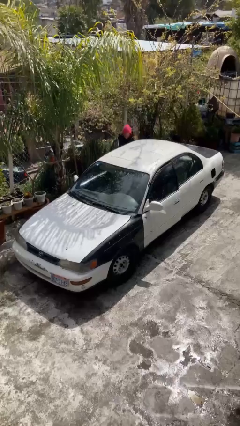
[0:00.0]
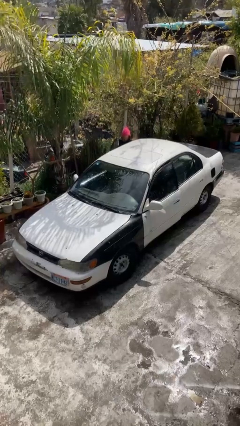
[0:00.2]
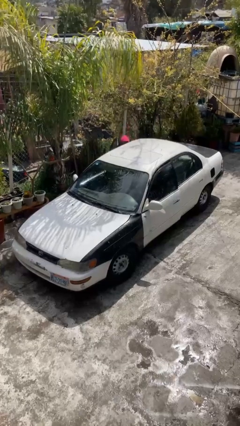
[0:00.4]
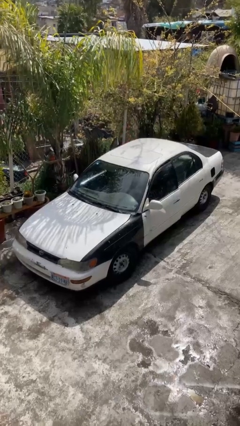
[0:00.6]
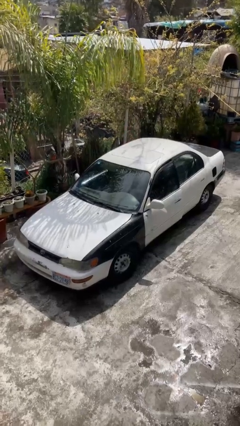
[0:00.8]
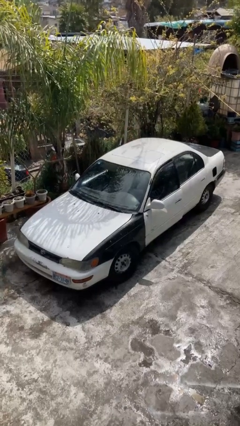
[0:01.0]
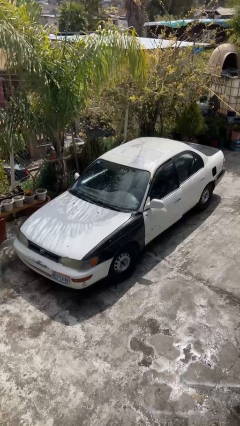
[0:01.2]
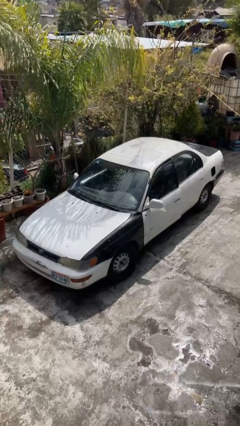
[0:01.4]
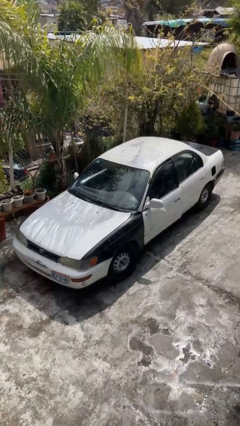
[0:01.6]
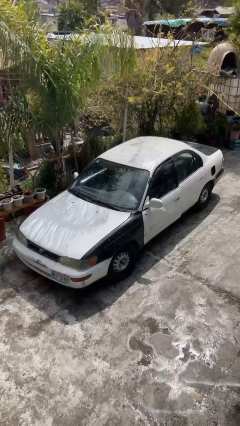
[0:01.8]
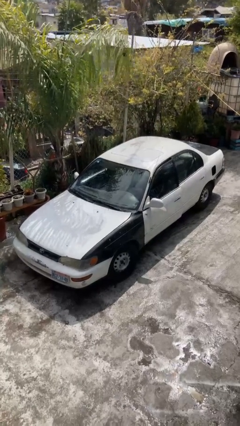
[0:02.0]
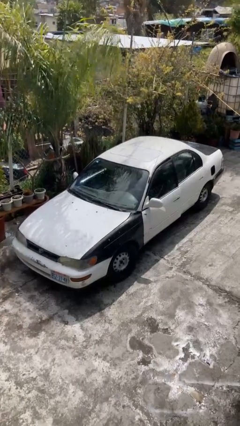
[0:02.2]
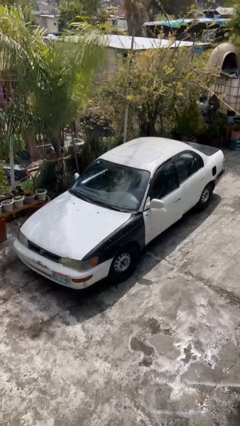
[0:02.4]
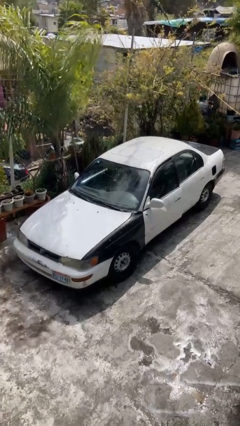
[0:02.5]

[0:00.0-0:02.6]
car picks up person

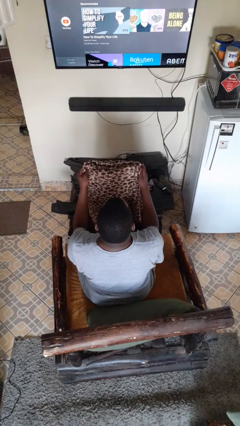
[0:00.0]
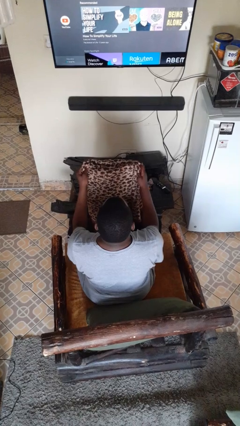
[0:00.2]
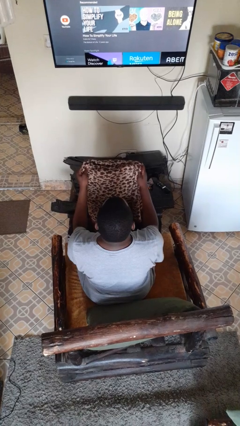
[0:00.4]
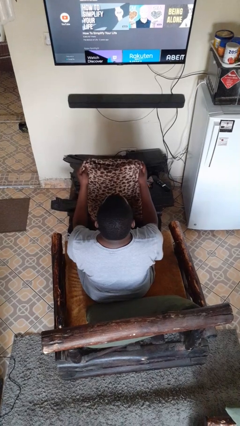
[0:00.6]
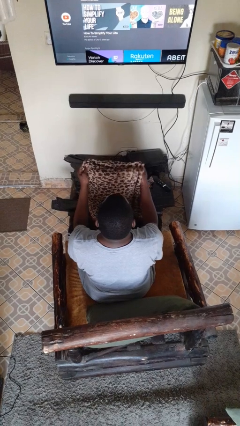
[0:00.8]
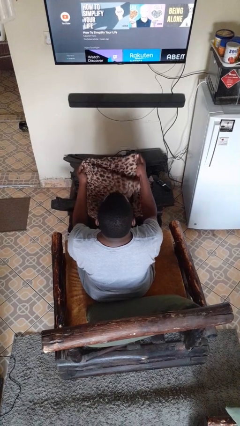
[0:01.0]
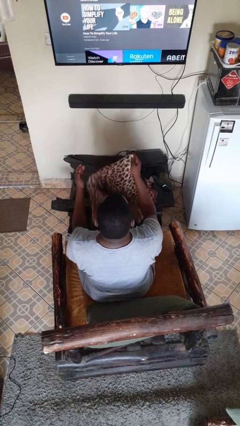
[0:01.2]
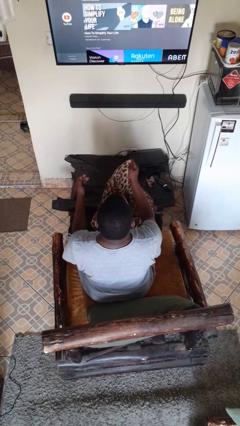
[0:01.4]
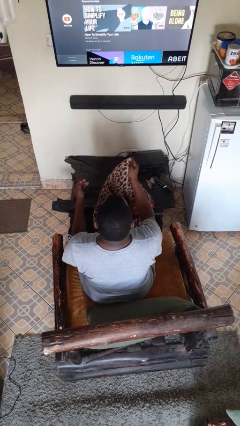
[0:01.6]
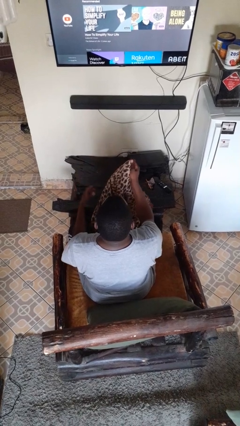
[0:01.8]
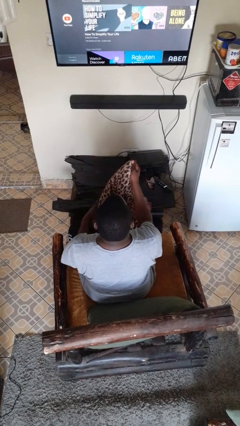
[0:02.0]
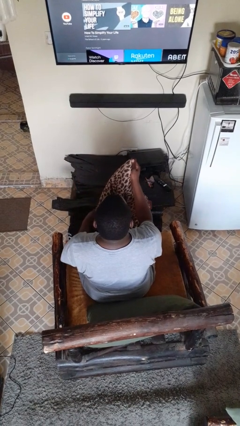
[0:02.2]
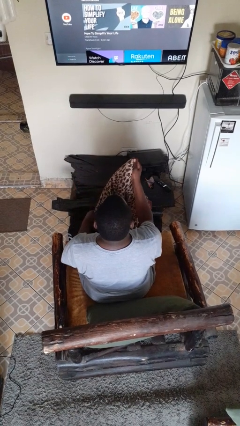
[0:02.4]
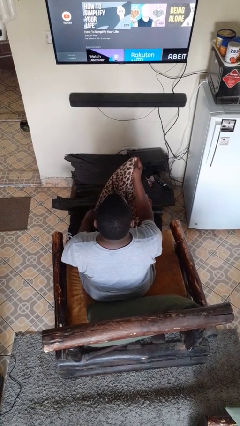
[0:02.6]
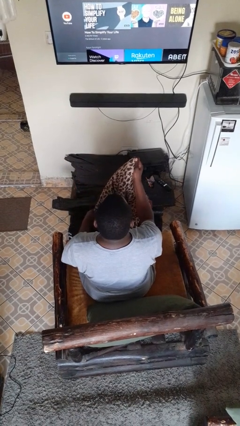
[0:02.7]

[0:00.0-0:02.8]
person unfolds blanket

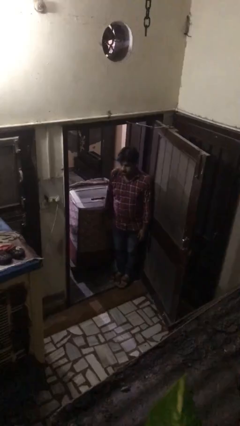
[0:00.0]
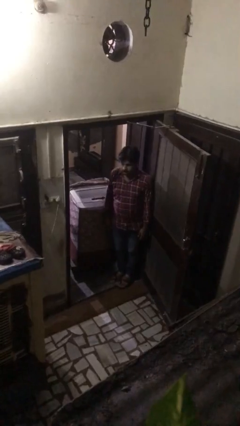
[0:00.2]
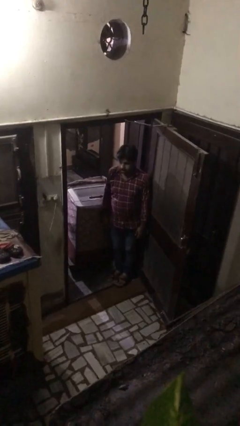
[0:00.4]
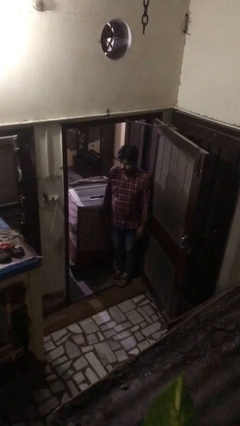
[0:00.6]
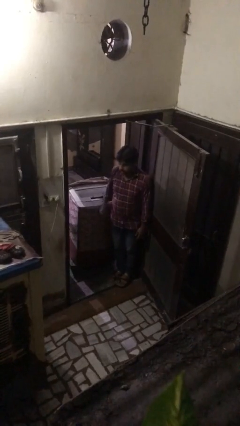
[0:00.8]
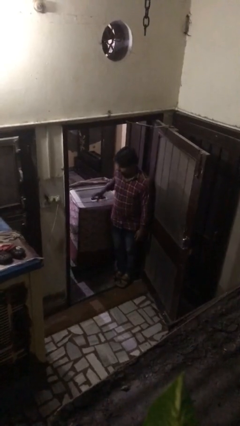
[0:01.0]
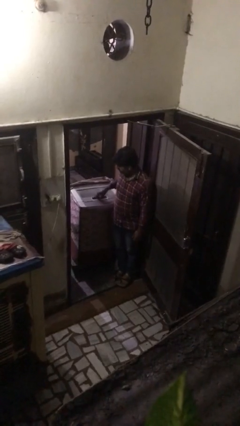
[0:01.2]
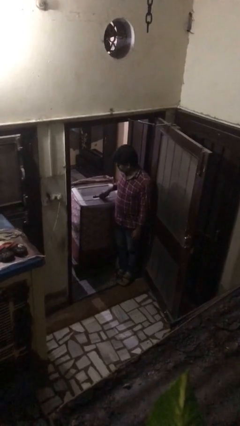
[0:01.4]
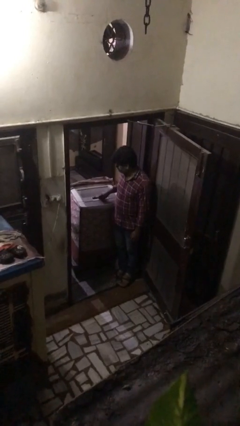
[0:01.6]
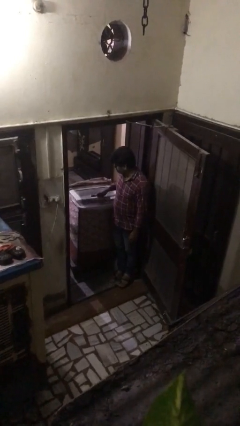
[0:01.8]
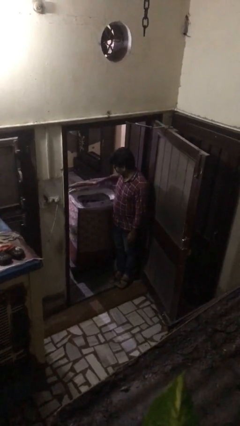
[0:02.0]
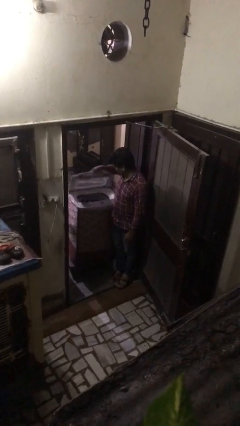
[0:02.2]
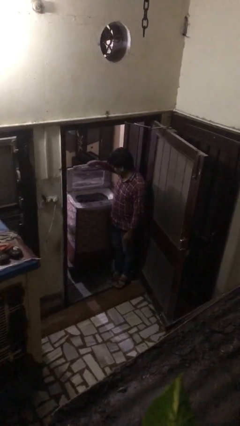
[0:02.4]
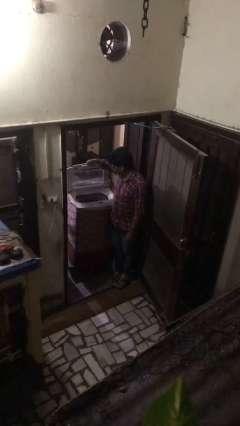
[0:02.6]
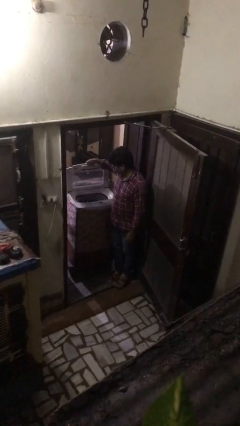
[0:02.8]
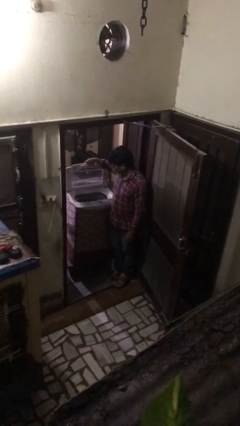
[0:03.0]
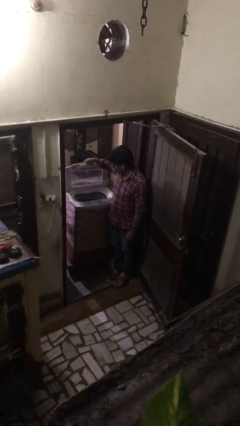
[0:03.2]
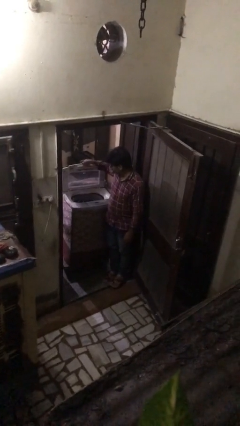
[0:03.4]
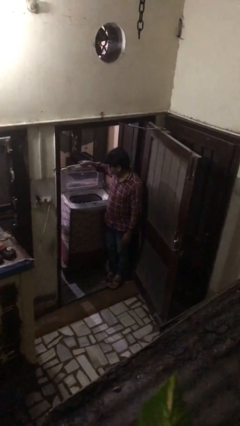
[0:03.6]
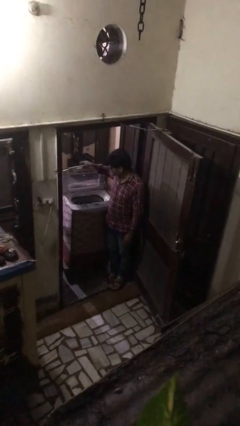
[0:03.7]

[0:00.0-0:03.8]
person opens clothes washer

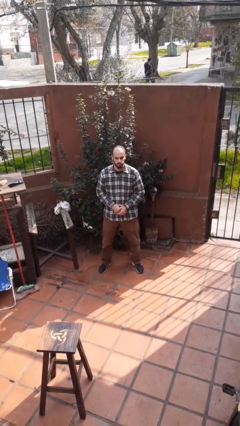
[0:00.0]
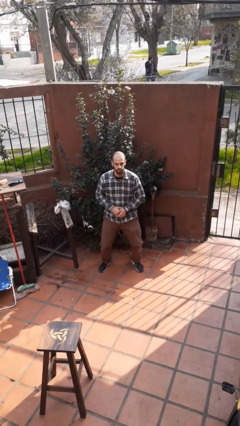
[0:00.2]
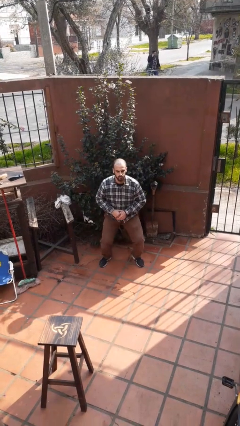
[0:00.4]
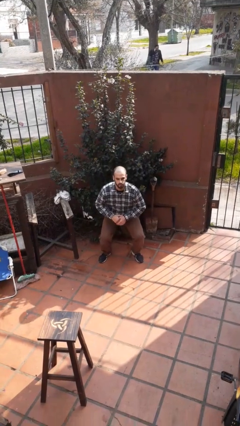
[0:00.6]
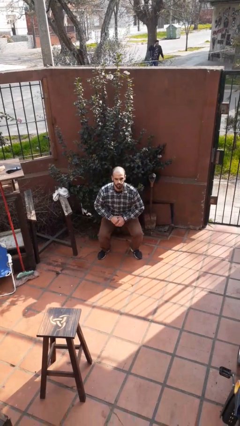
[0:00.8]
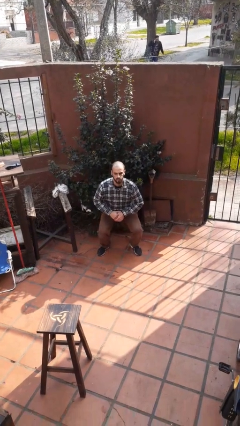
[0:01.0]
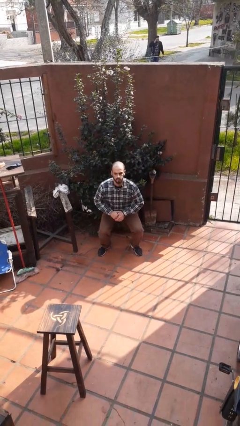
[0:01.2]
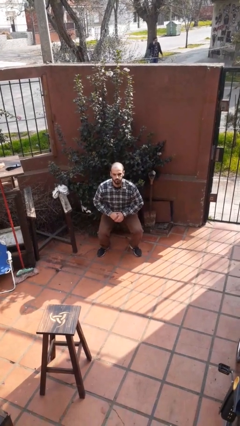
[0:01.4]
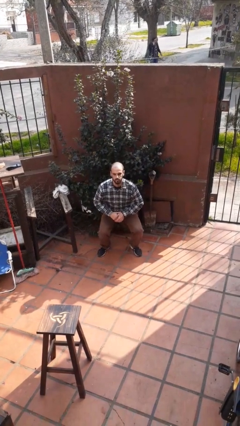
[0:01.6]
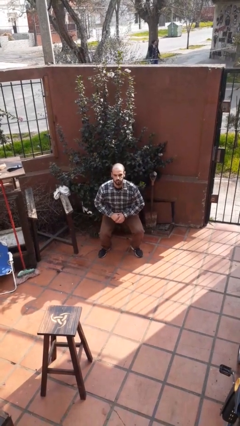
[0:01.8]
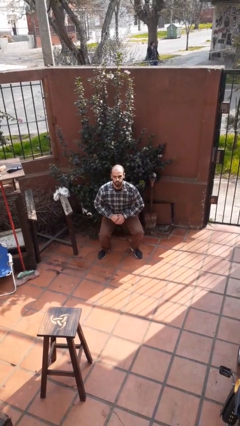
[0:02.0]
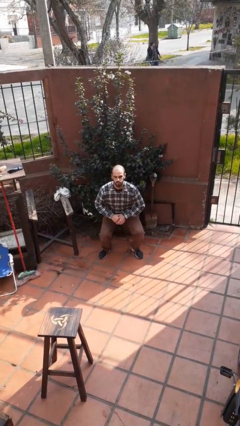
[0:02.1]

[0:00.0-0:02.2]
person squats

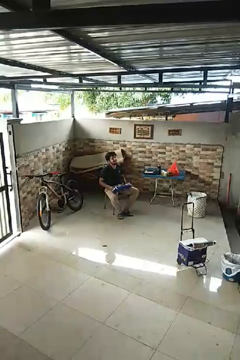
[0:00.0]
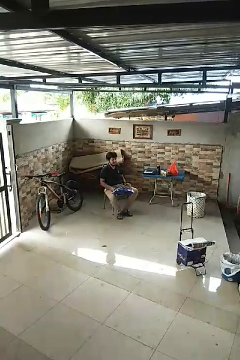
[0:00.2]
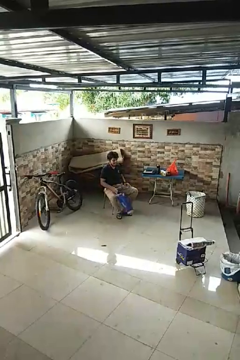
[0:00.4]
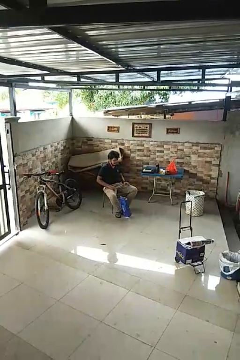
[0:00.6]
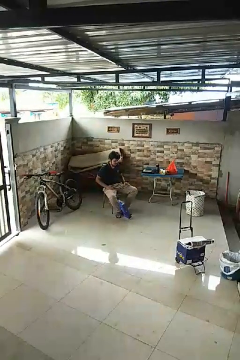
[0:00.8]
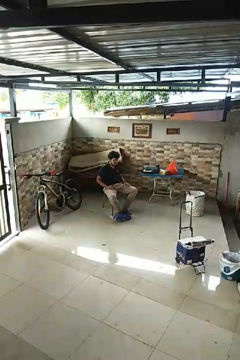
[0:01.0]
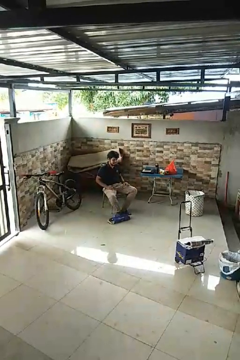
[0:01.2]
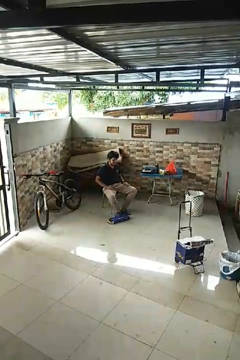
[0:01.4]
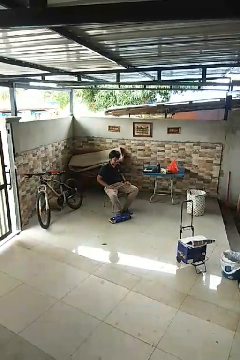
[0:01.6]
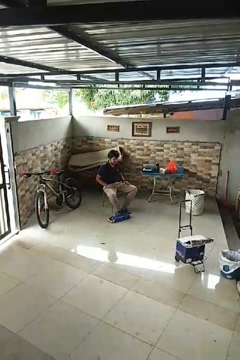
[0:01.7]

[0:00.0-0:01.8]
person drops object

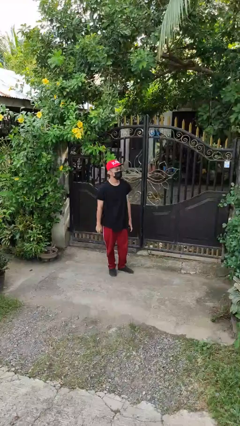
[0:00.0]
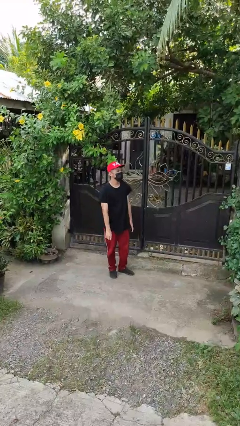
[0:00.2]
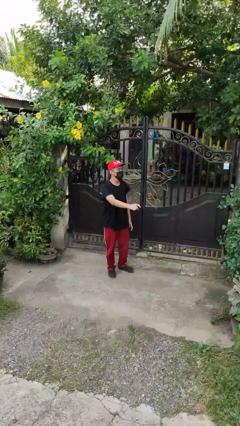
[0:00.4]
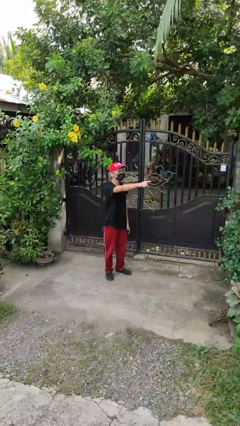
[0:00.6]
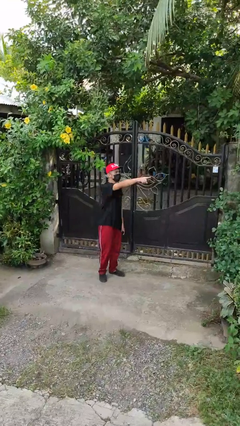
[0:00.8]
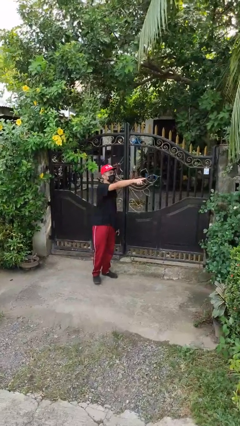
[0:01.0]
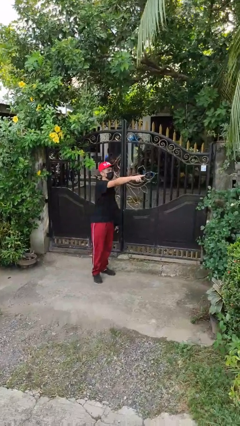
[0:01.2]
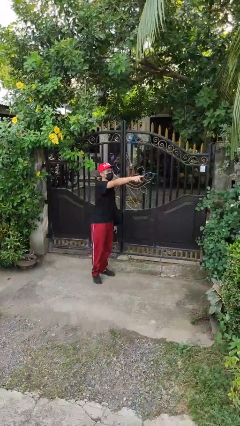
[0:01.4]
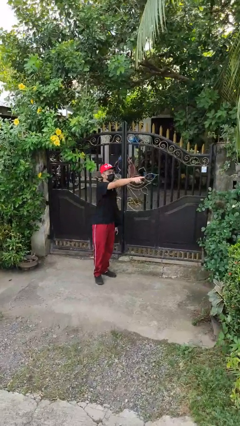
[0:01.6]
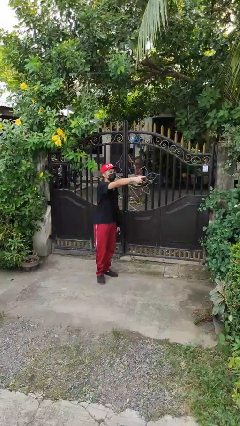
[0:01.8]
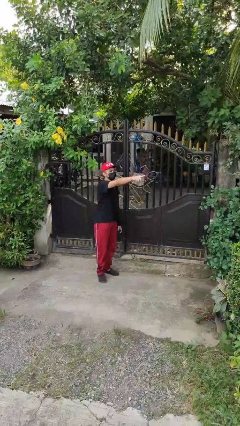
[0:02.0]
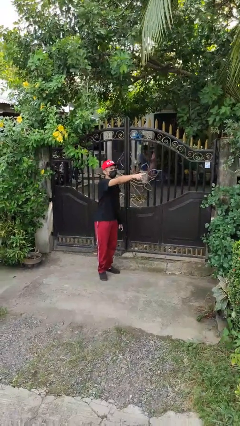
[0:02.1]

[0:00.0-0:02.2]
person points at person

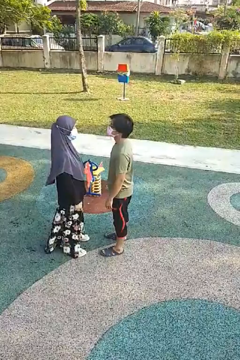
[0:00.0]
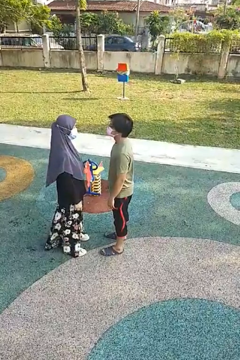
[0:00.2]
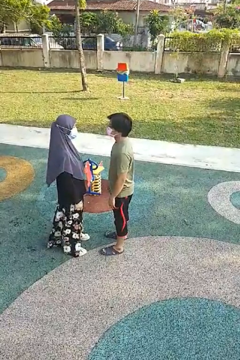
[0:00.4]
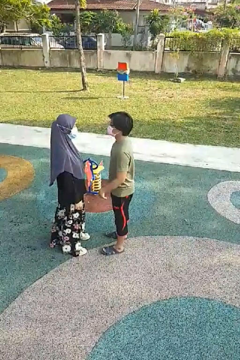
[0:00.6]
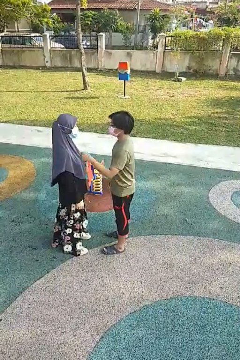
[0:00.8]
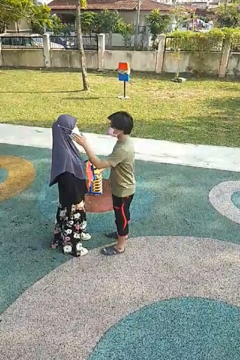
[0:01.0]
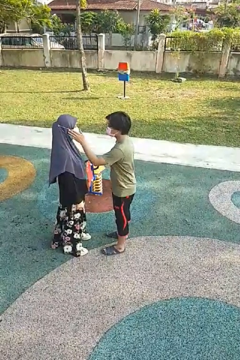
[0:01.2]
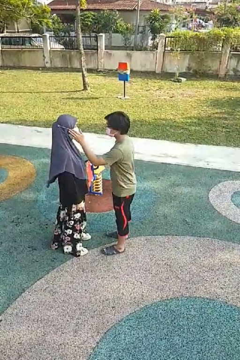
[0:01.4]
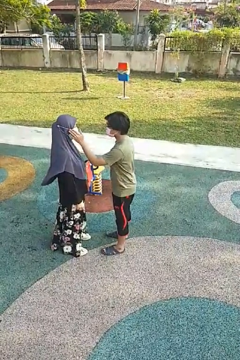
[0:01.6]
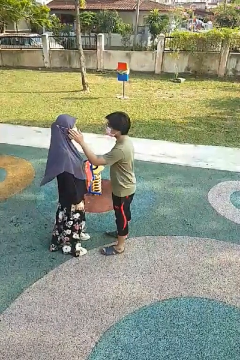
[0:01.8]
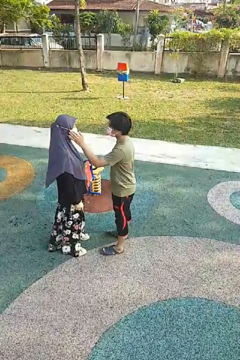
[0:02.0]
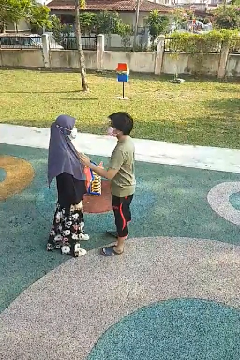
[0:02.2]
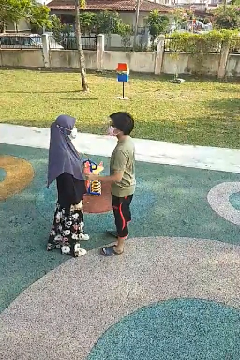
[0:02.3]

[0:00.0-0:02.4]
person touches face of person

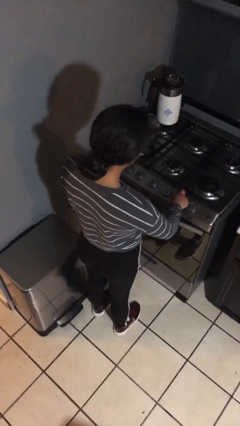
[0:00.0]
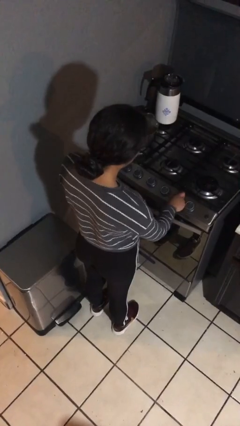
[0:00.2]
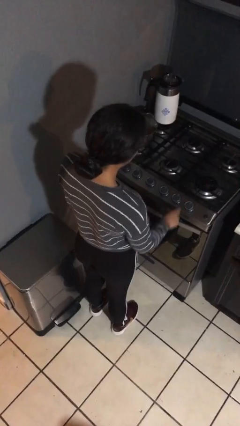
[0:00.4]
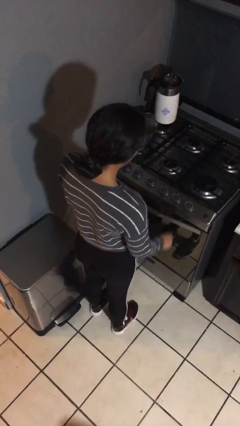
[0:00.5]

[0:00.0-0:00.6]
person turns off stovetop
